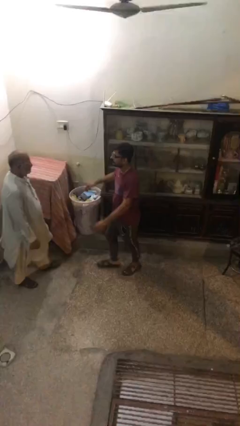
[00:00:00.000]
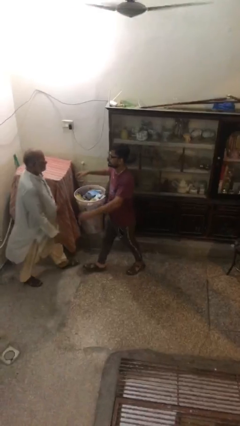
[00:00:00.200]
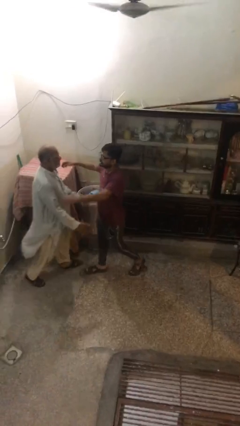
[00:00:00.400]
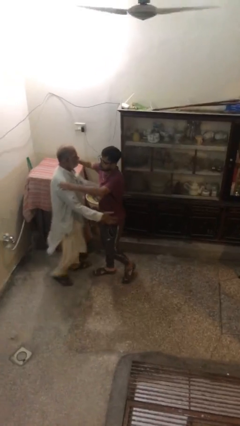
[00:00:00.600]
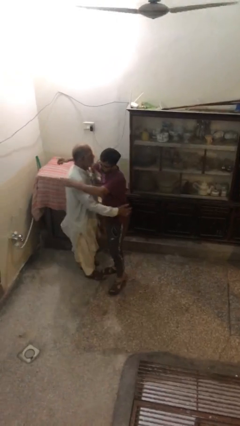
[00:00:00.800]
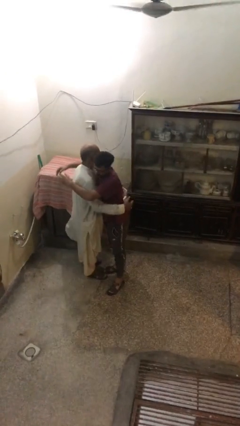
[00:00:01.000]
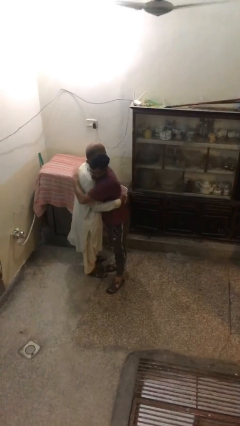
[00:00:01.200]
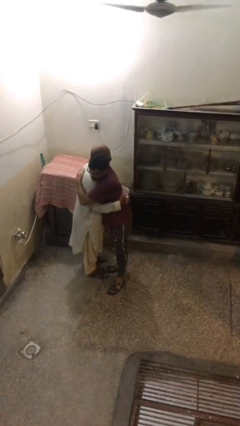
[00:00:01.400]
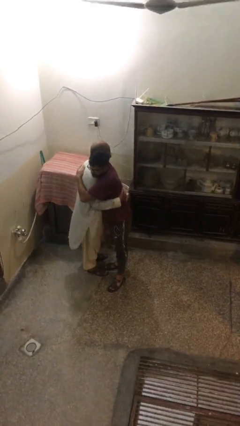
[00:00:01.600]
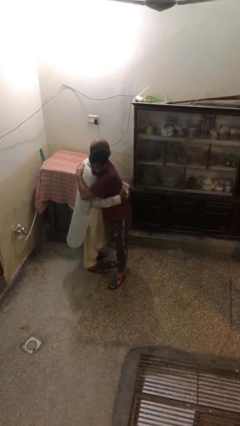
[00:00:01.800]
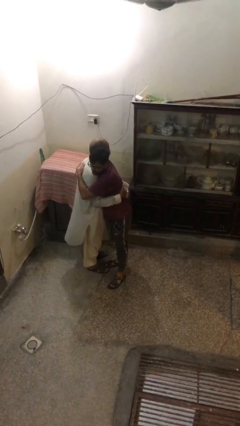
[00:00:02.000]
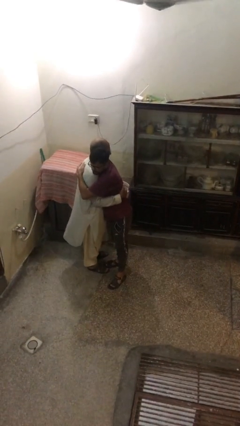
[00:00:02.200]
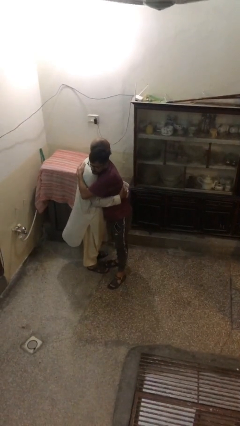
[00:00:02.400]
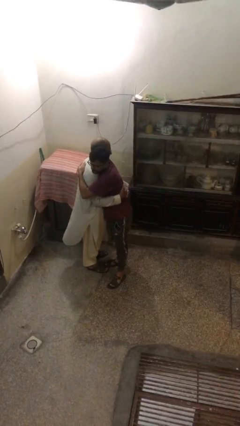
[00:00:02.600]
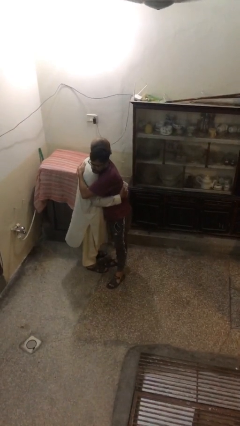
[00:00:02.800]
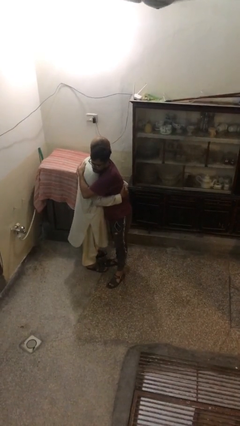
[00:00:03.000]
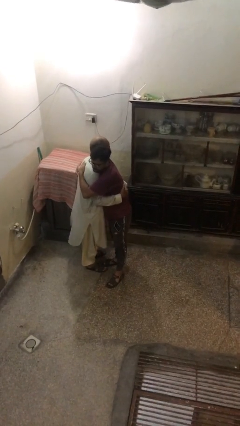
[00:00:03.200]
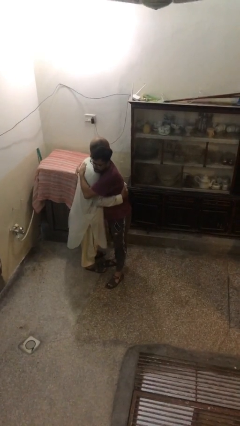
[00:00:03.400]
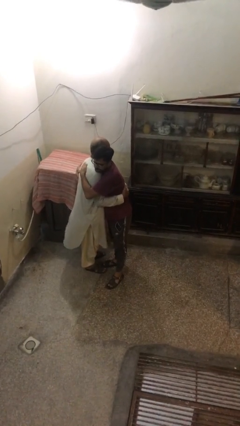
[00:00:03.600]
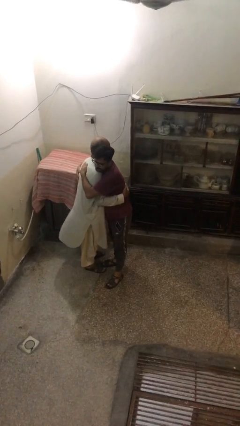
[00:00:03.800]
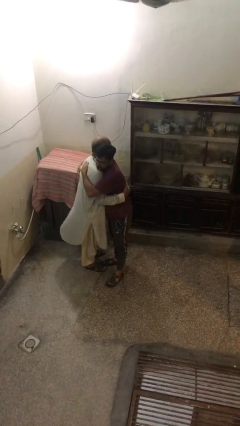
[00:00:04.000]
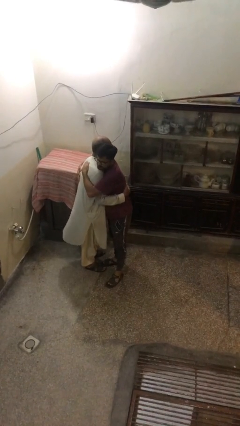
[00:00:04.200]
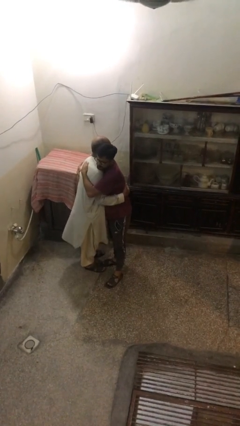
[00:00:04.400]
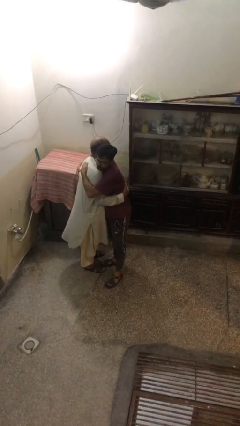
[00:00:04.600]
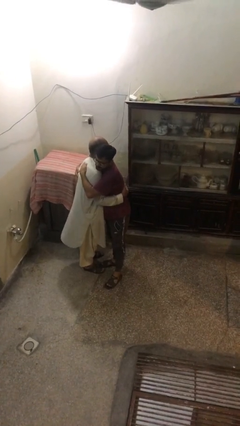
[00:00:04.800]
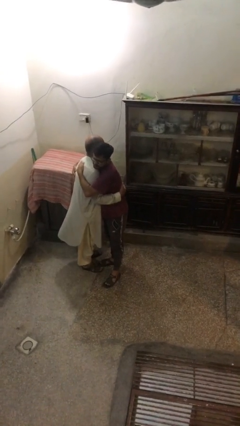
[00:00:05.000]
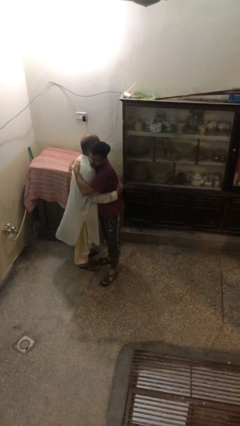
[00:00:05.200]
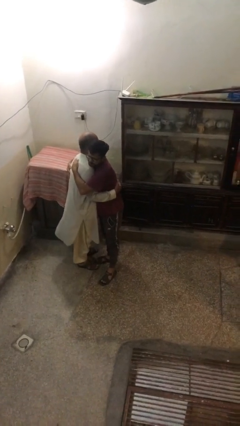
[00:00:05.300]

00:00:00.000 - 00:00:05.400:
person embraces person

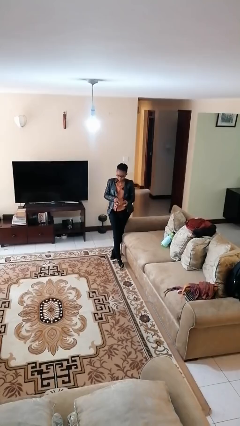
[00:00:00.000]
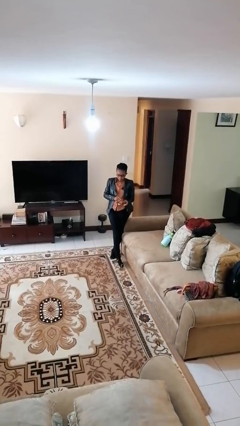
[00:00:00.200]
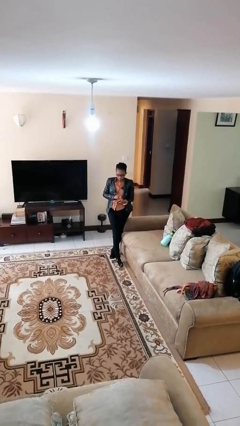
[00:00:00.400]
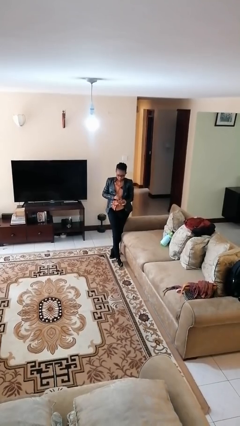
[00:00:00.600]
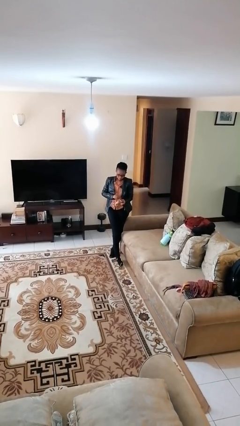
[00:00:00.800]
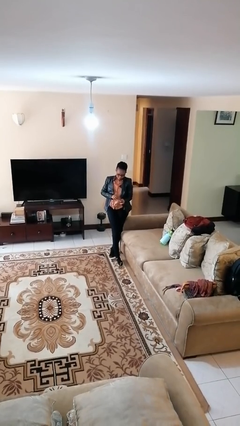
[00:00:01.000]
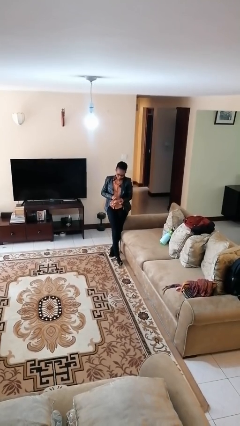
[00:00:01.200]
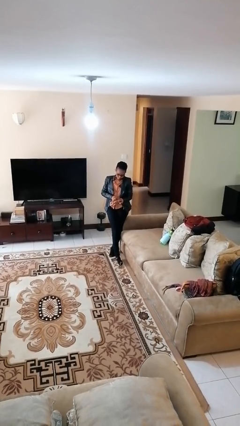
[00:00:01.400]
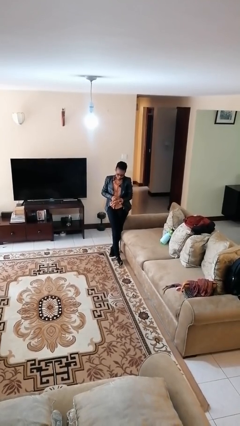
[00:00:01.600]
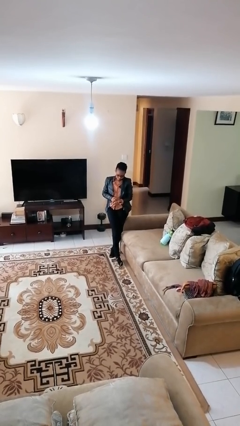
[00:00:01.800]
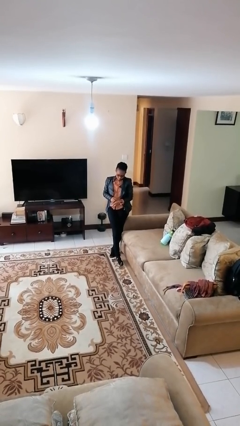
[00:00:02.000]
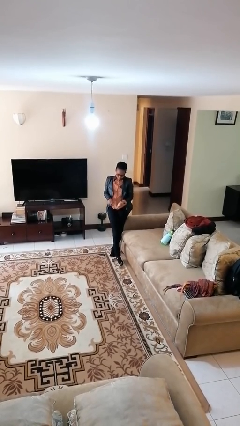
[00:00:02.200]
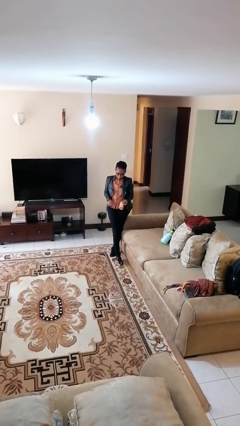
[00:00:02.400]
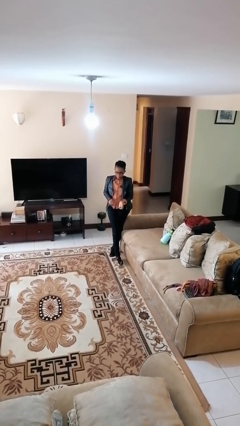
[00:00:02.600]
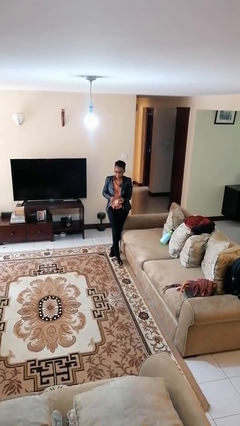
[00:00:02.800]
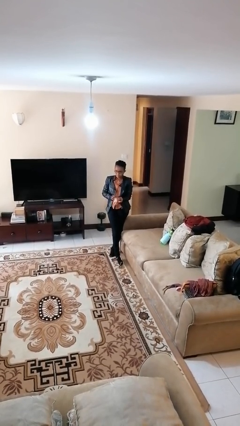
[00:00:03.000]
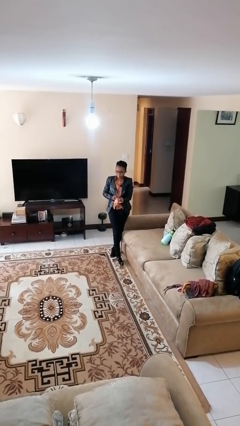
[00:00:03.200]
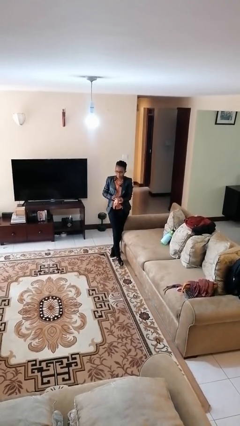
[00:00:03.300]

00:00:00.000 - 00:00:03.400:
person puts on wristwatch

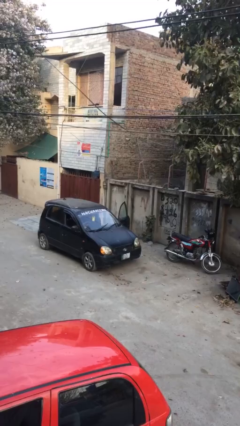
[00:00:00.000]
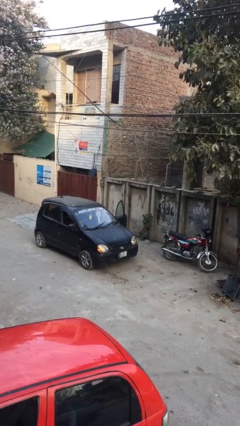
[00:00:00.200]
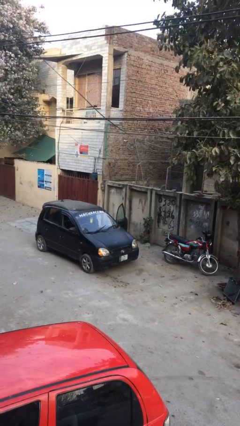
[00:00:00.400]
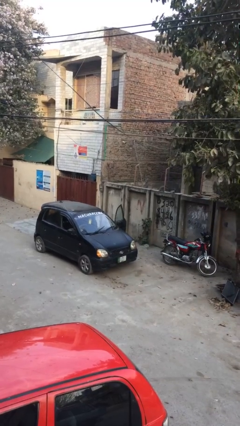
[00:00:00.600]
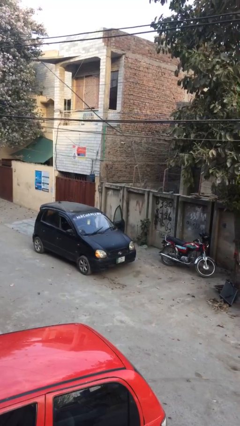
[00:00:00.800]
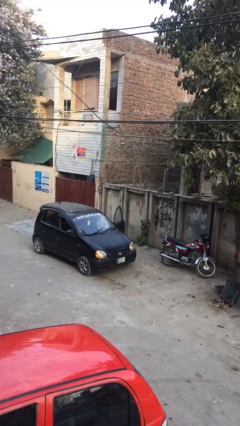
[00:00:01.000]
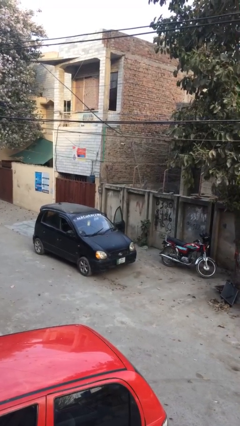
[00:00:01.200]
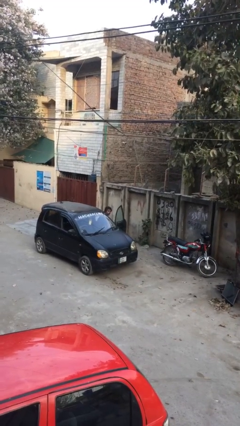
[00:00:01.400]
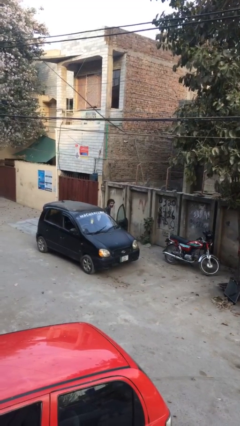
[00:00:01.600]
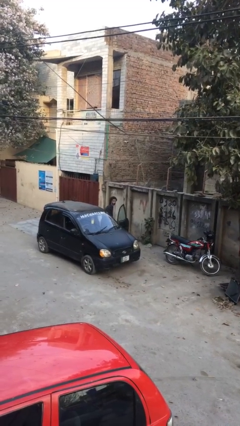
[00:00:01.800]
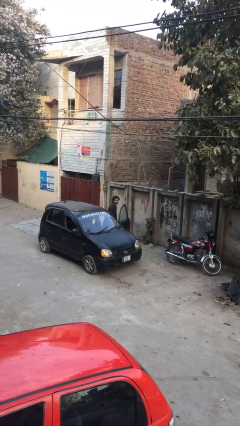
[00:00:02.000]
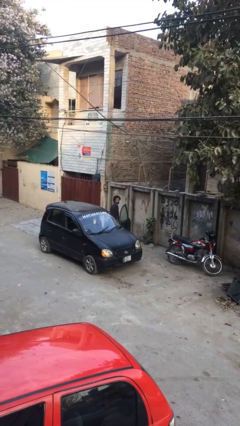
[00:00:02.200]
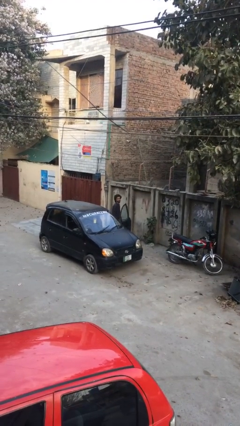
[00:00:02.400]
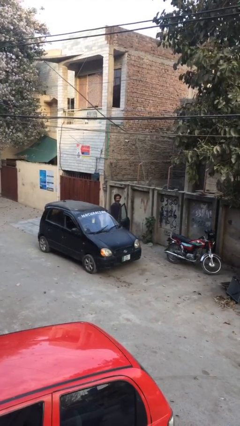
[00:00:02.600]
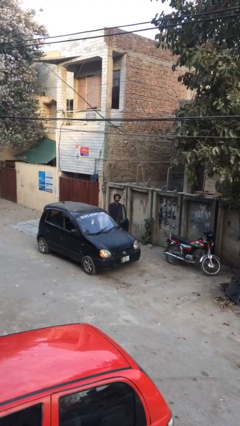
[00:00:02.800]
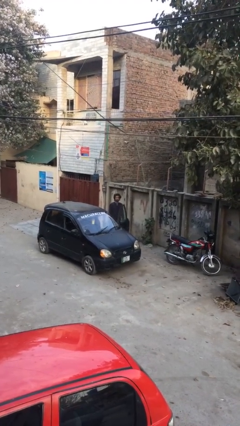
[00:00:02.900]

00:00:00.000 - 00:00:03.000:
person exits car

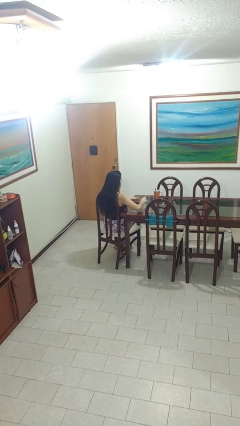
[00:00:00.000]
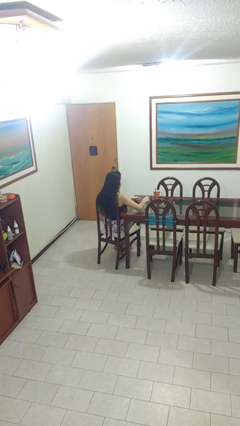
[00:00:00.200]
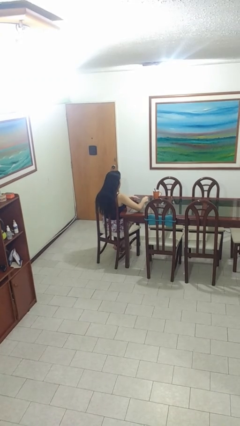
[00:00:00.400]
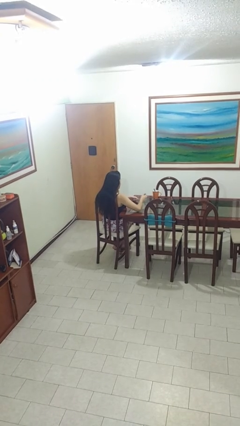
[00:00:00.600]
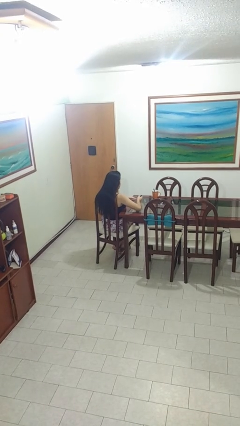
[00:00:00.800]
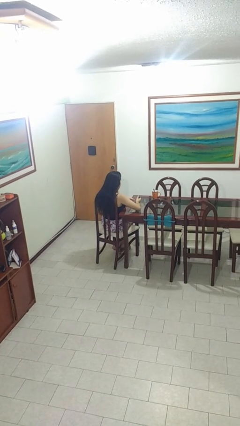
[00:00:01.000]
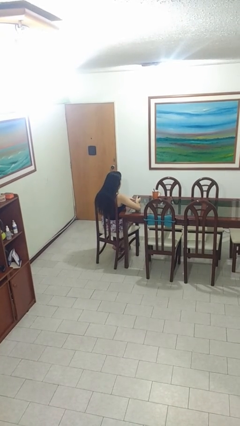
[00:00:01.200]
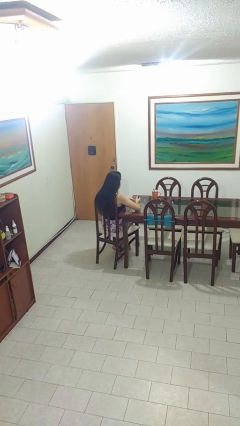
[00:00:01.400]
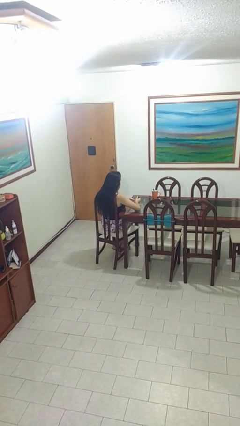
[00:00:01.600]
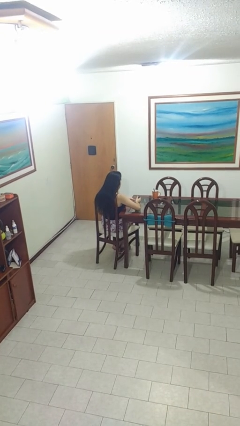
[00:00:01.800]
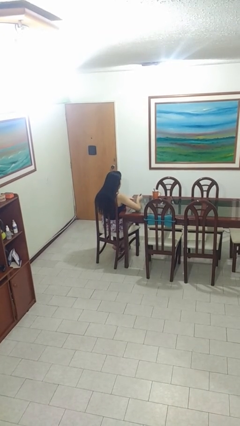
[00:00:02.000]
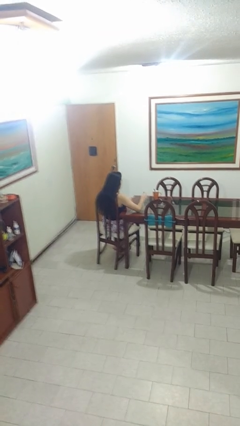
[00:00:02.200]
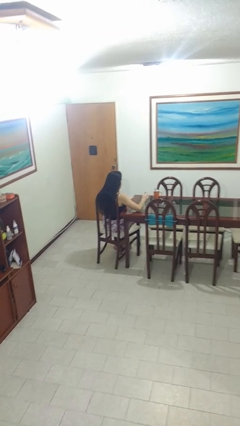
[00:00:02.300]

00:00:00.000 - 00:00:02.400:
person paints fingernails

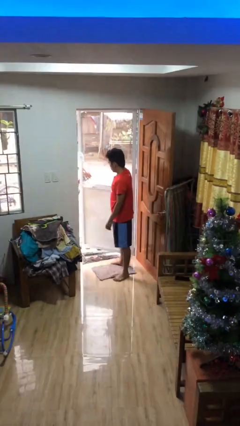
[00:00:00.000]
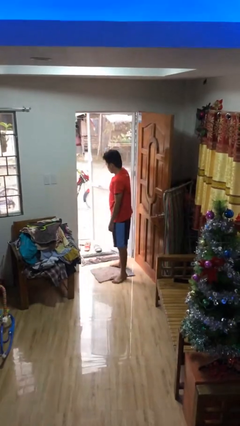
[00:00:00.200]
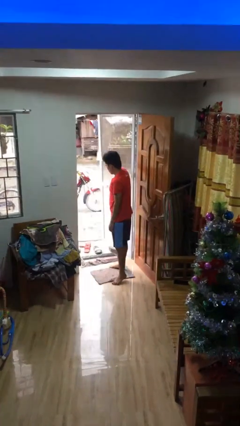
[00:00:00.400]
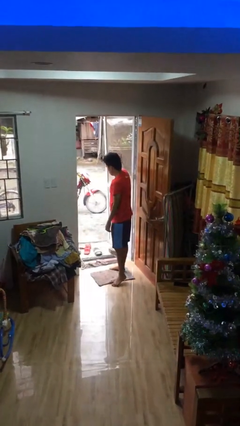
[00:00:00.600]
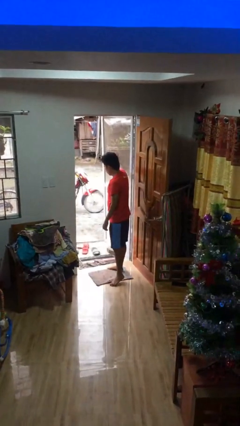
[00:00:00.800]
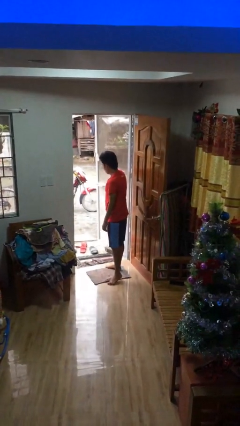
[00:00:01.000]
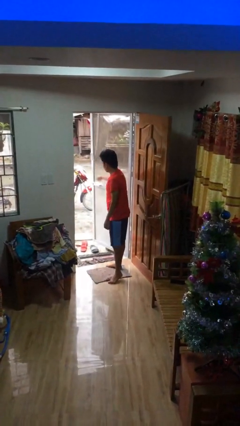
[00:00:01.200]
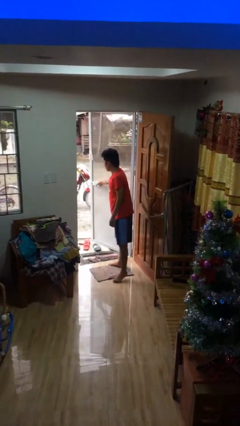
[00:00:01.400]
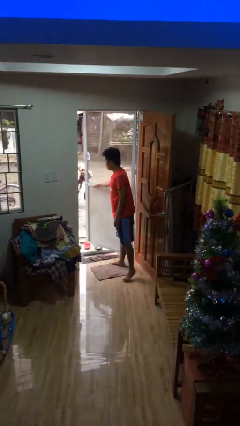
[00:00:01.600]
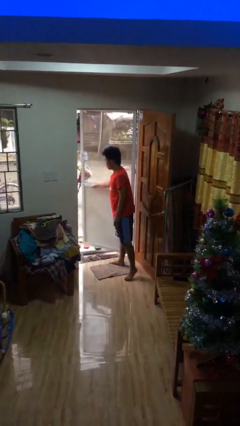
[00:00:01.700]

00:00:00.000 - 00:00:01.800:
person opens facility door

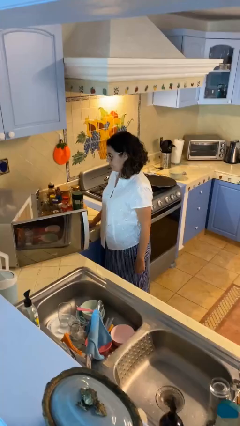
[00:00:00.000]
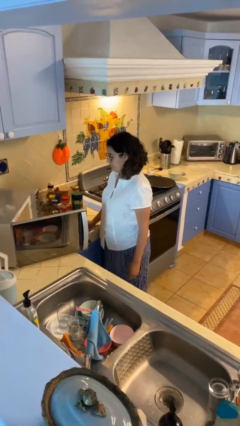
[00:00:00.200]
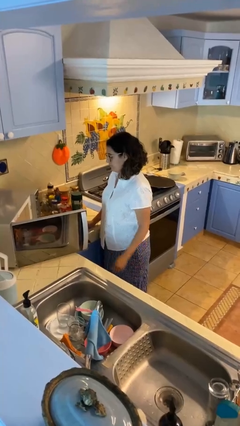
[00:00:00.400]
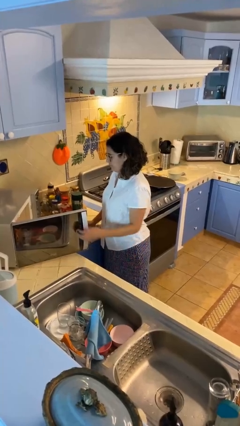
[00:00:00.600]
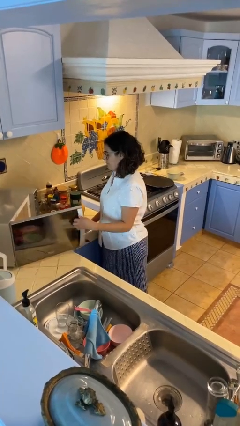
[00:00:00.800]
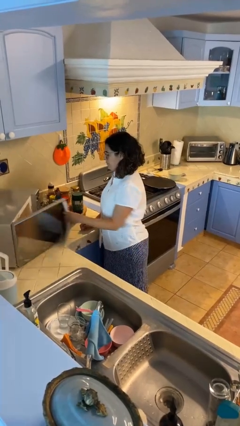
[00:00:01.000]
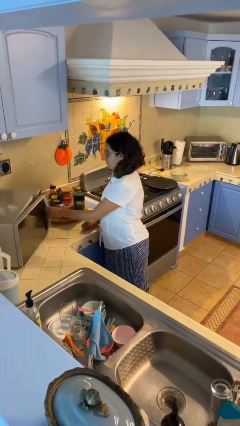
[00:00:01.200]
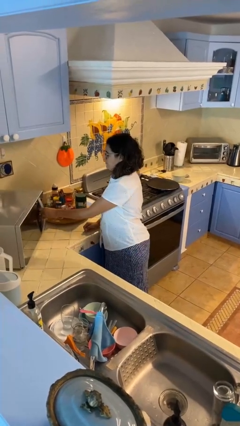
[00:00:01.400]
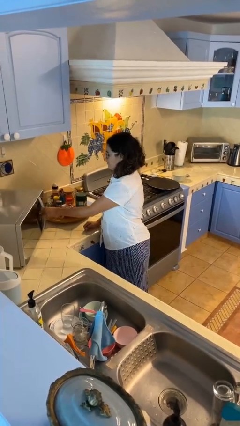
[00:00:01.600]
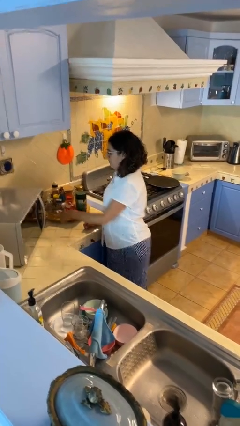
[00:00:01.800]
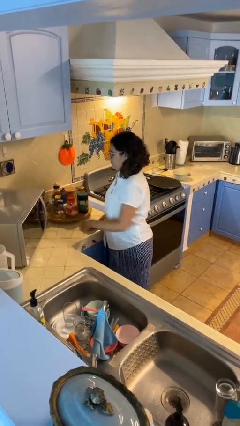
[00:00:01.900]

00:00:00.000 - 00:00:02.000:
person closes microwave
